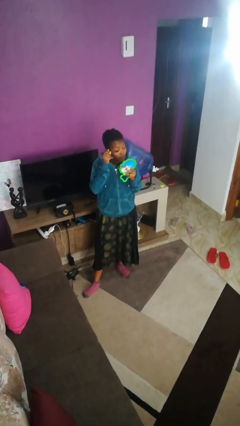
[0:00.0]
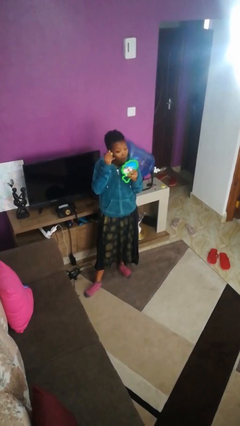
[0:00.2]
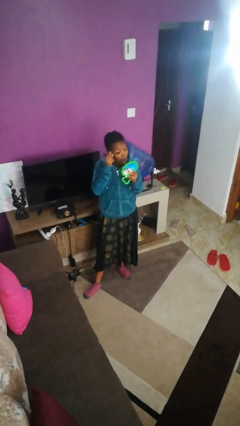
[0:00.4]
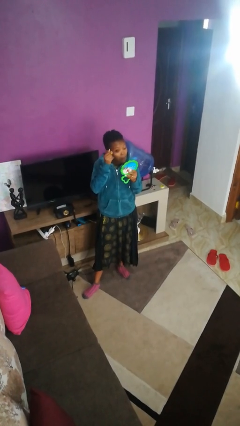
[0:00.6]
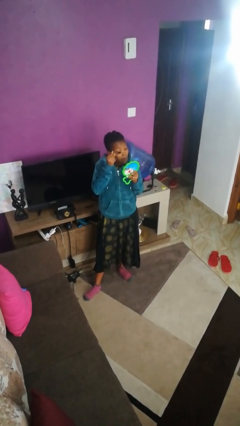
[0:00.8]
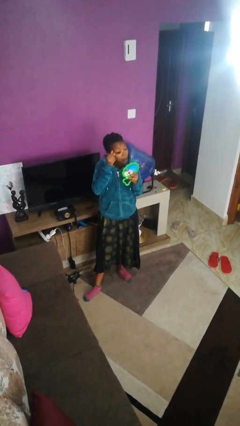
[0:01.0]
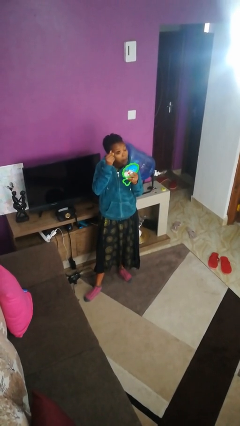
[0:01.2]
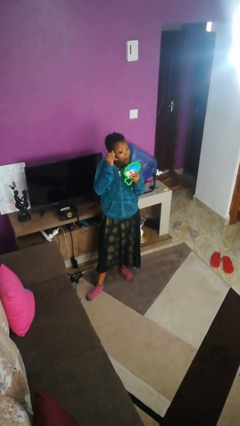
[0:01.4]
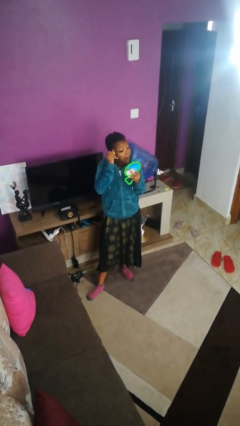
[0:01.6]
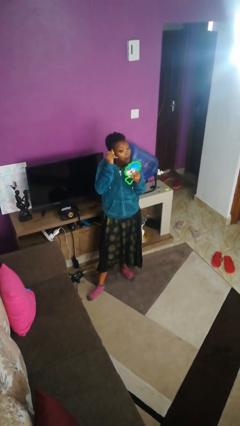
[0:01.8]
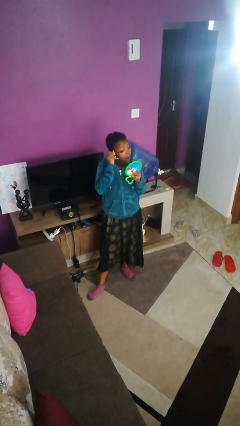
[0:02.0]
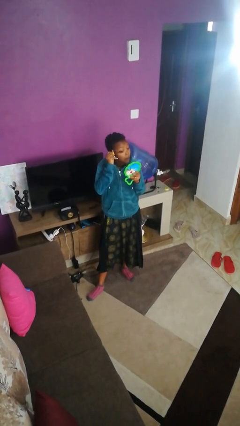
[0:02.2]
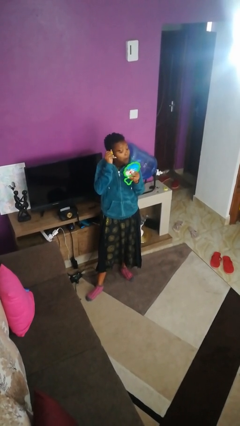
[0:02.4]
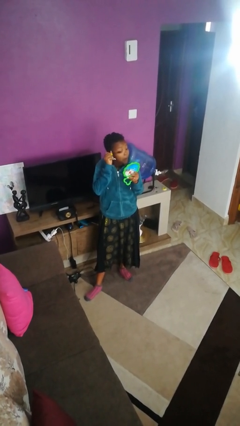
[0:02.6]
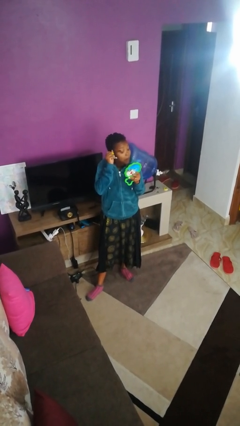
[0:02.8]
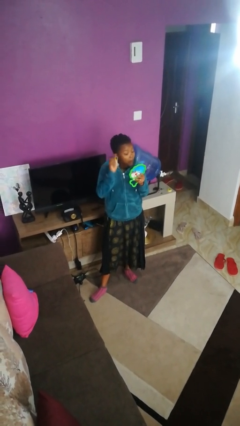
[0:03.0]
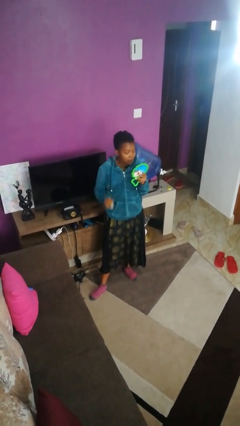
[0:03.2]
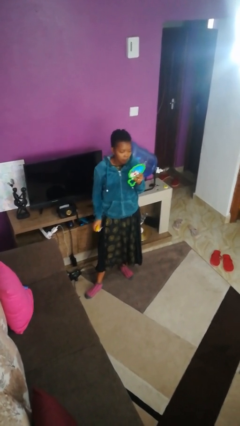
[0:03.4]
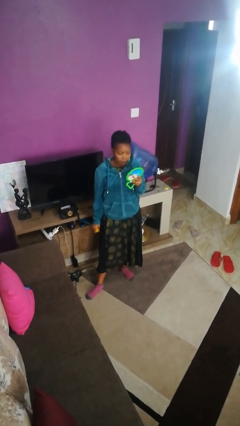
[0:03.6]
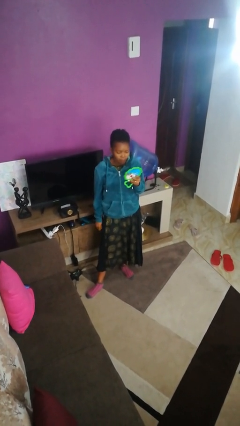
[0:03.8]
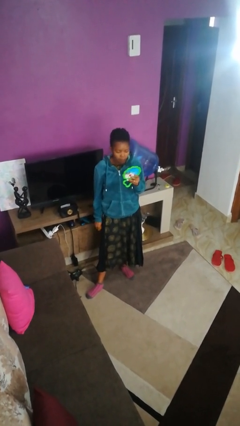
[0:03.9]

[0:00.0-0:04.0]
person applies eye makeup

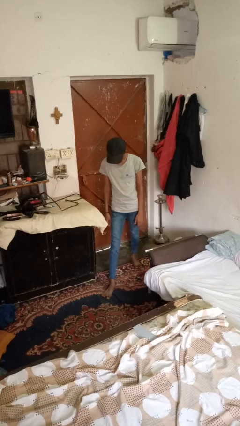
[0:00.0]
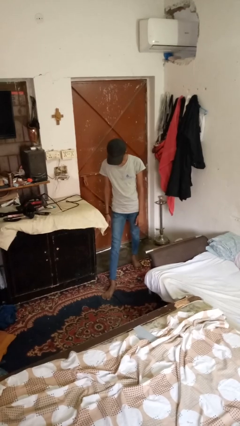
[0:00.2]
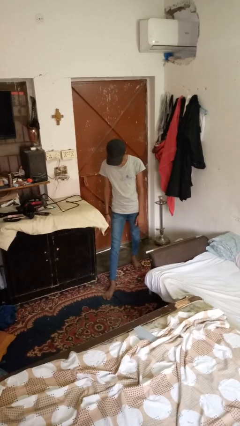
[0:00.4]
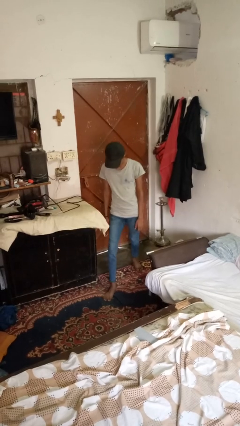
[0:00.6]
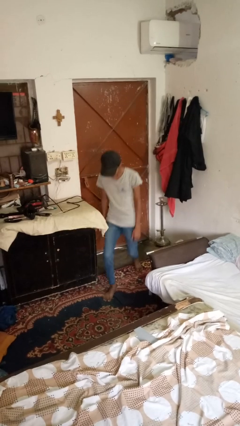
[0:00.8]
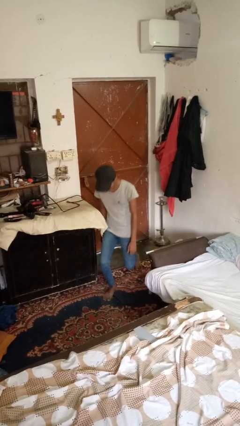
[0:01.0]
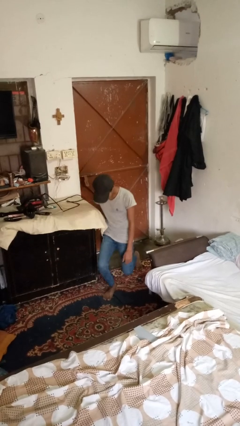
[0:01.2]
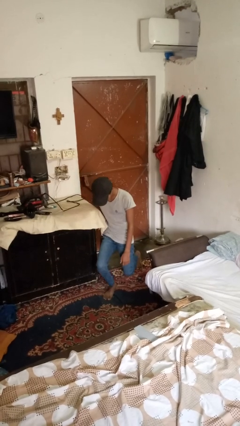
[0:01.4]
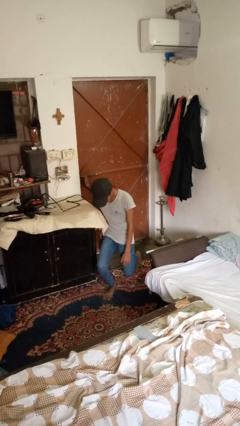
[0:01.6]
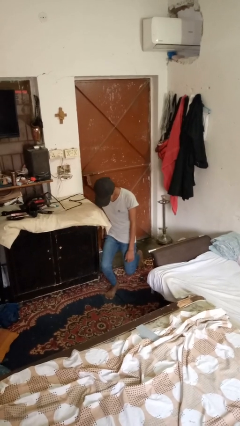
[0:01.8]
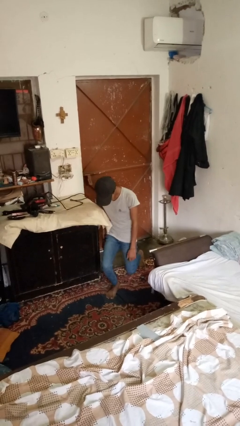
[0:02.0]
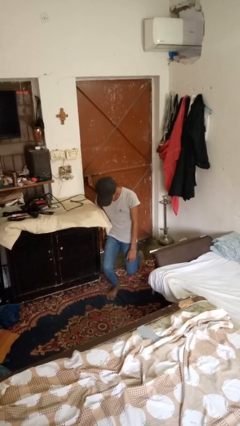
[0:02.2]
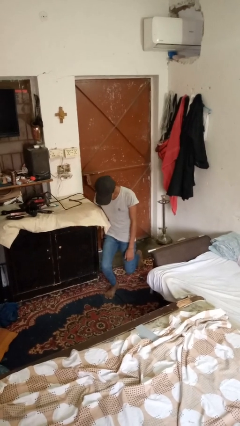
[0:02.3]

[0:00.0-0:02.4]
person exercises with lunges

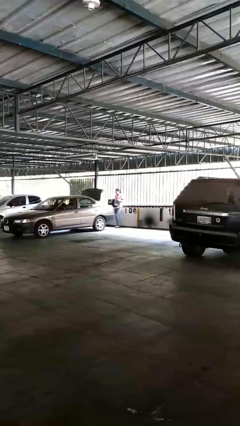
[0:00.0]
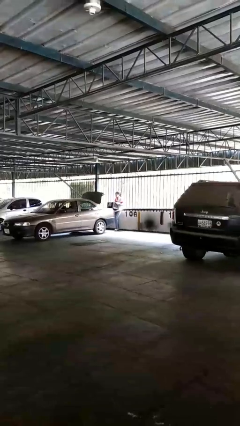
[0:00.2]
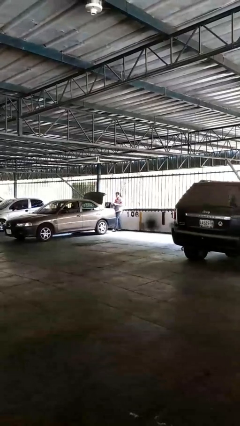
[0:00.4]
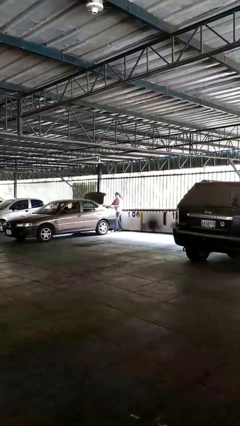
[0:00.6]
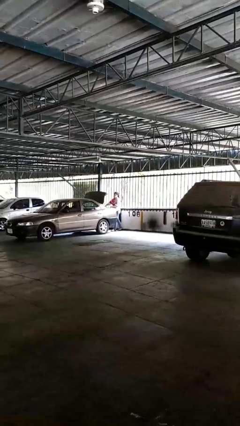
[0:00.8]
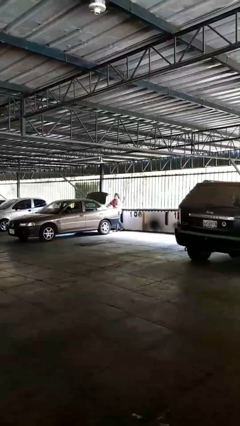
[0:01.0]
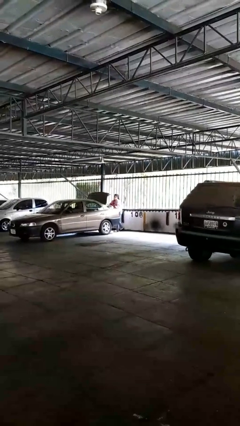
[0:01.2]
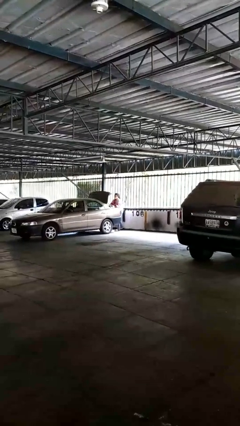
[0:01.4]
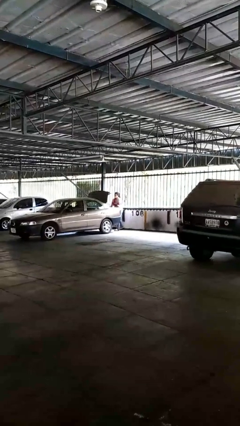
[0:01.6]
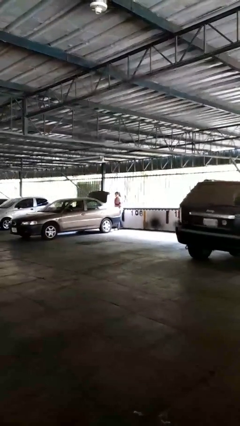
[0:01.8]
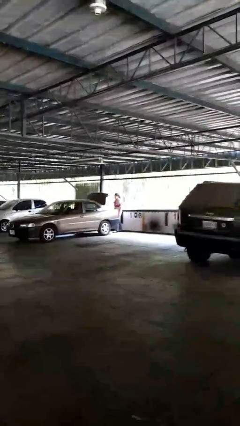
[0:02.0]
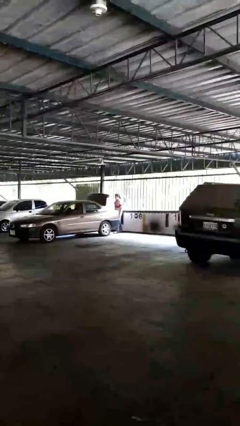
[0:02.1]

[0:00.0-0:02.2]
person loads car

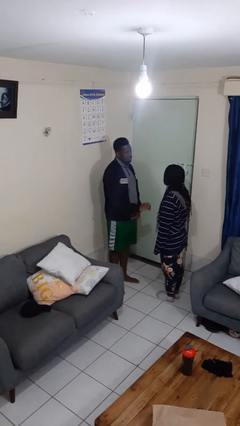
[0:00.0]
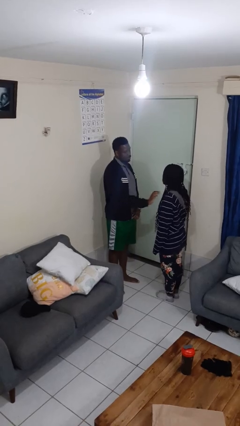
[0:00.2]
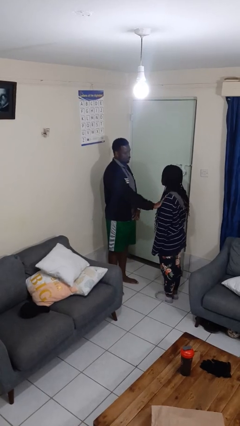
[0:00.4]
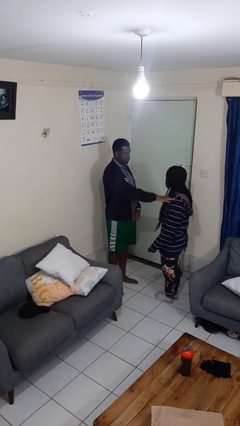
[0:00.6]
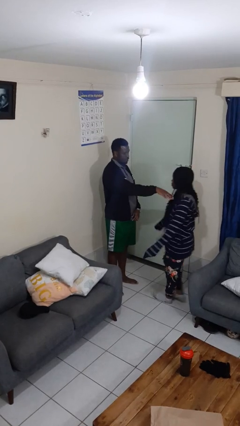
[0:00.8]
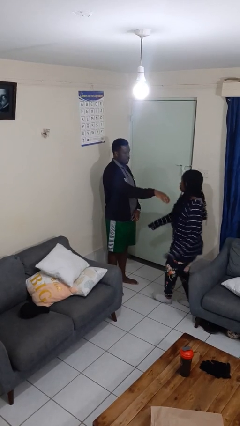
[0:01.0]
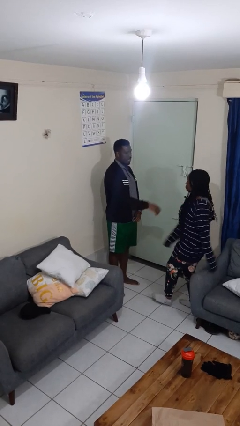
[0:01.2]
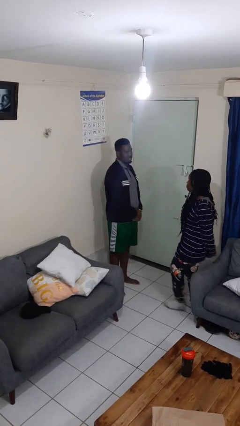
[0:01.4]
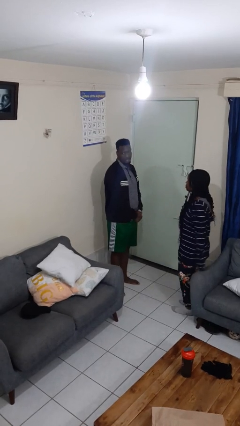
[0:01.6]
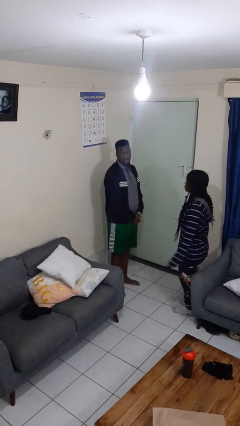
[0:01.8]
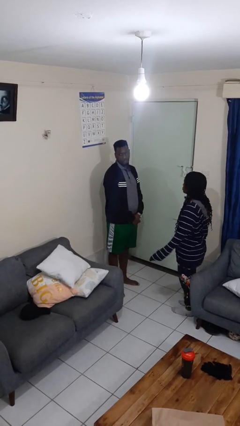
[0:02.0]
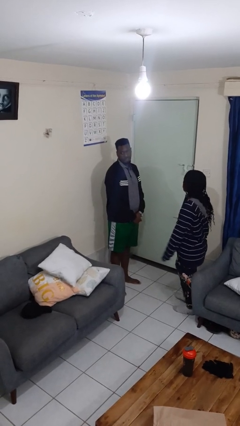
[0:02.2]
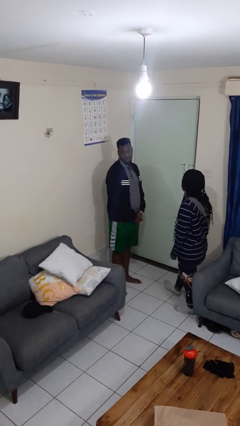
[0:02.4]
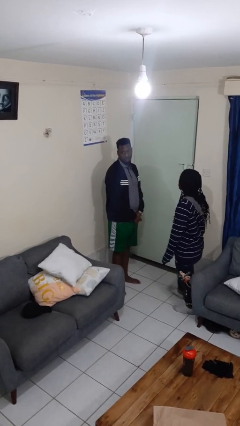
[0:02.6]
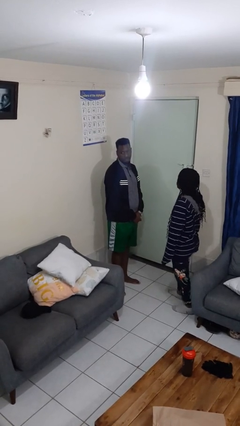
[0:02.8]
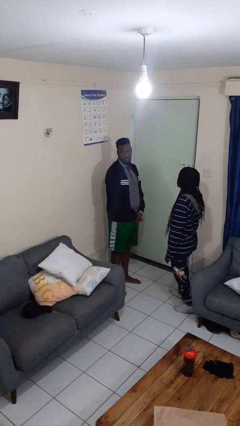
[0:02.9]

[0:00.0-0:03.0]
person shoves person

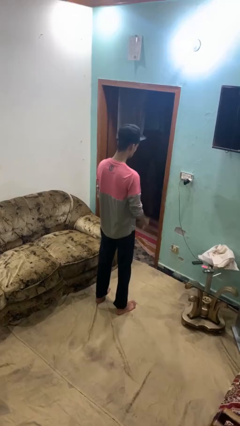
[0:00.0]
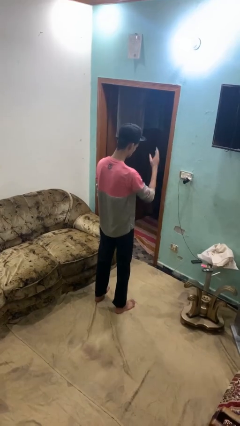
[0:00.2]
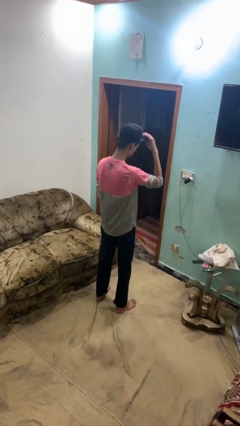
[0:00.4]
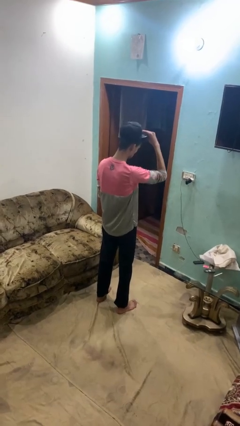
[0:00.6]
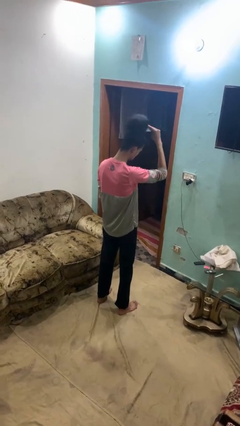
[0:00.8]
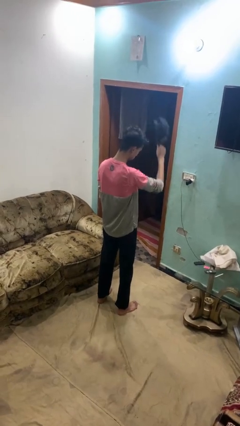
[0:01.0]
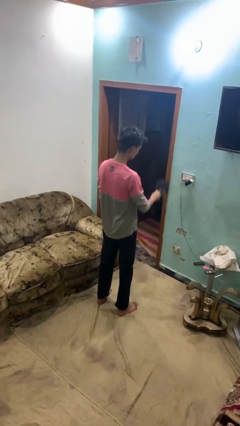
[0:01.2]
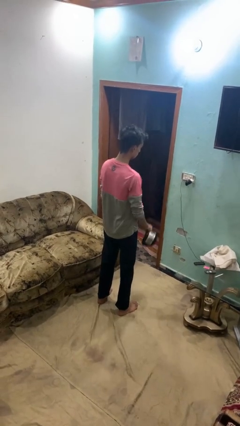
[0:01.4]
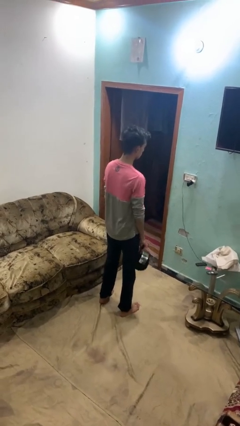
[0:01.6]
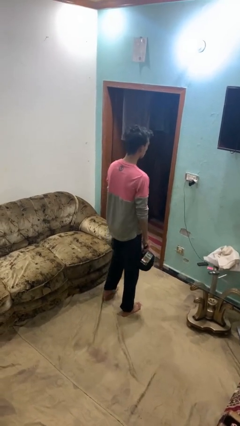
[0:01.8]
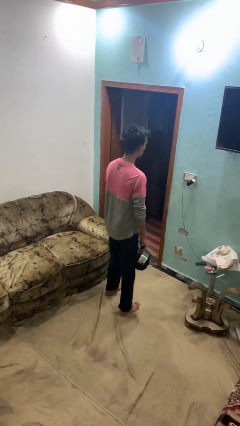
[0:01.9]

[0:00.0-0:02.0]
person takes off hat

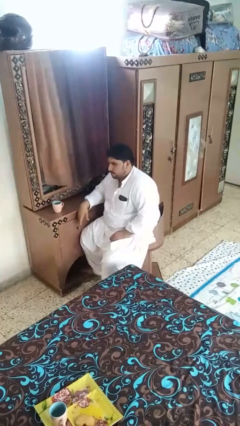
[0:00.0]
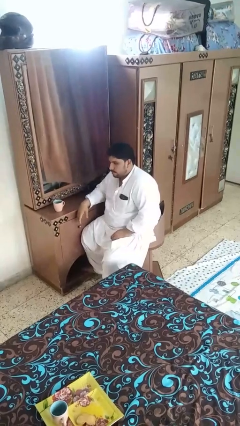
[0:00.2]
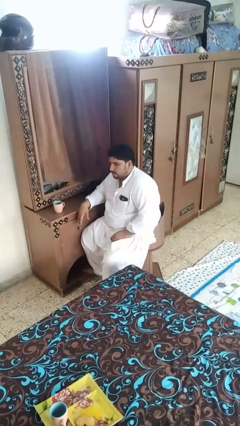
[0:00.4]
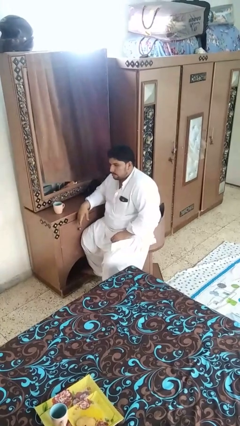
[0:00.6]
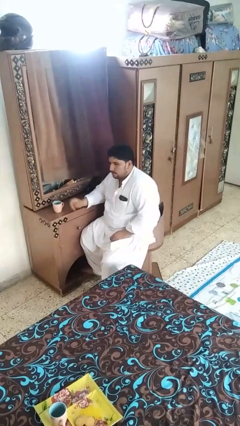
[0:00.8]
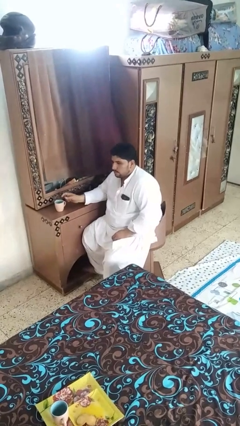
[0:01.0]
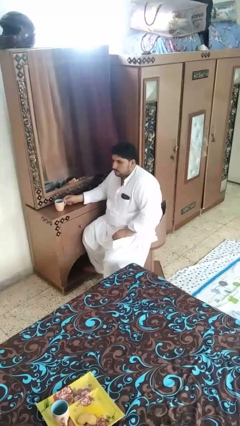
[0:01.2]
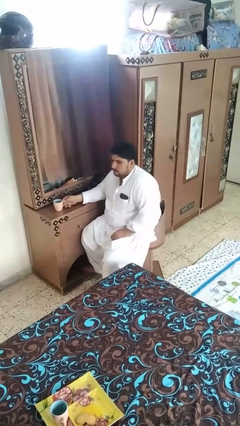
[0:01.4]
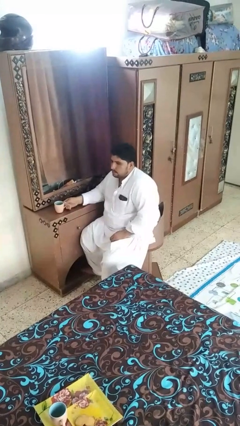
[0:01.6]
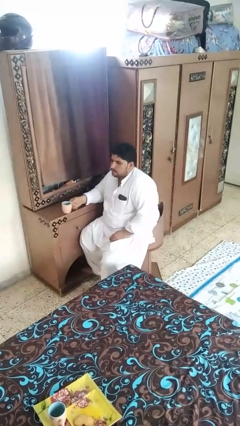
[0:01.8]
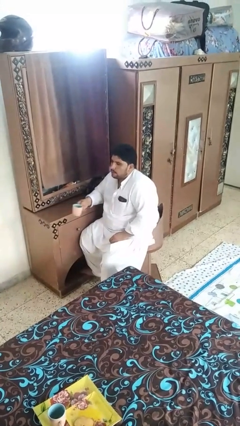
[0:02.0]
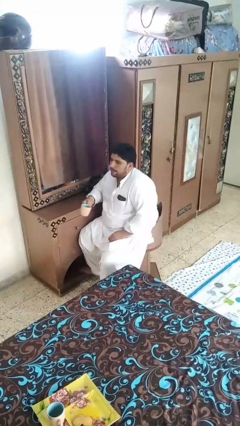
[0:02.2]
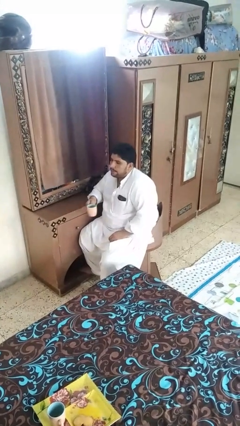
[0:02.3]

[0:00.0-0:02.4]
person picks up object from table

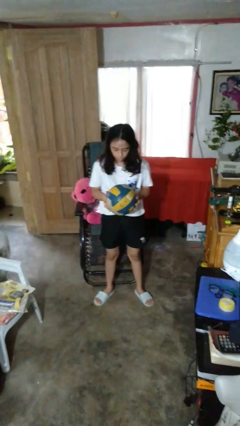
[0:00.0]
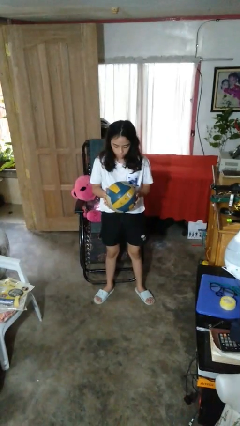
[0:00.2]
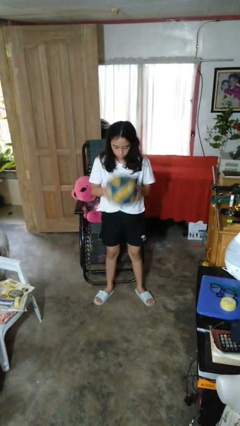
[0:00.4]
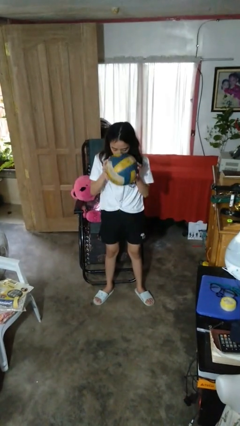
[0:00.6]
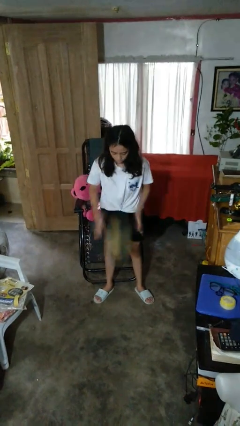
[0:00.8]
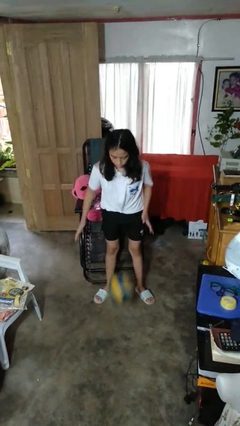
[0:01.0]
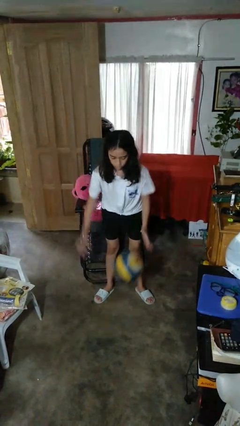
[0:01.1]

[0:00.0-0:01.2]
person bounces ball on floor
